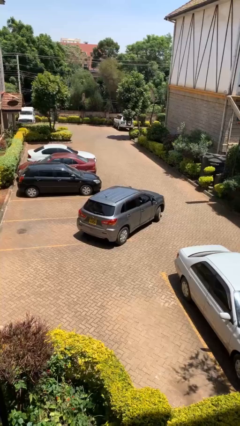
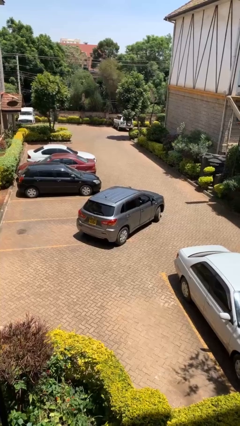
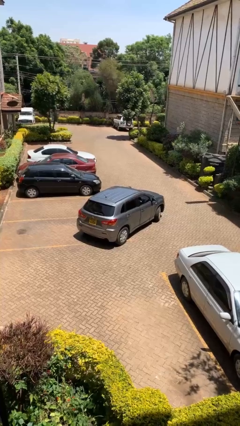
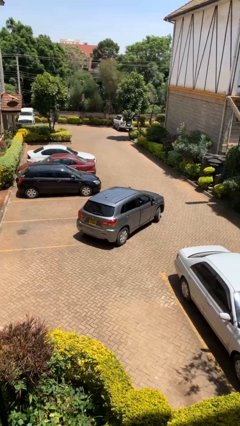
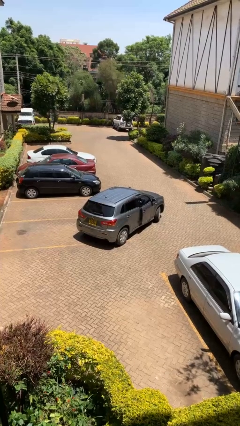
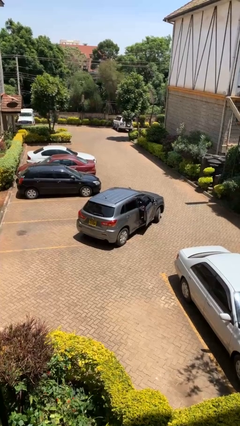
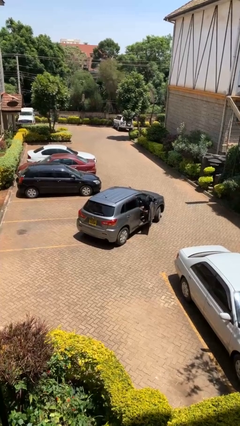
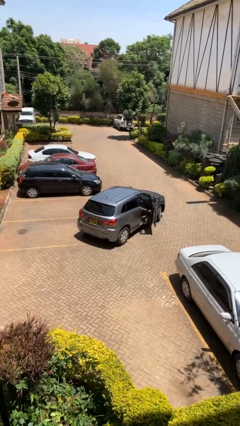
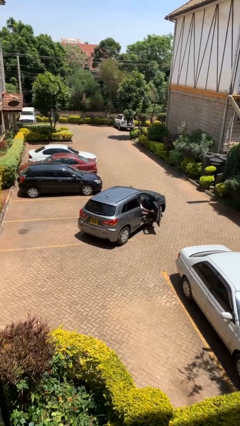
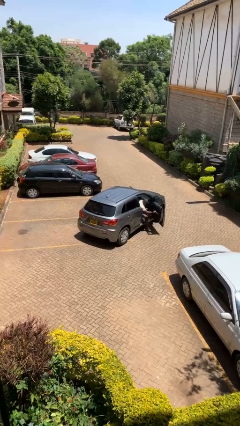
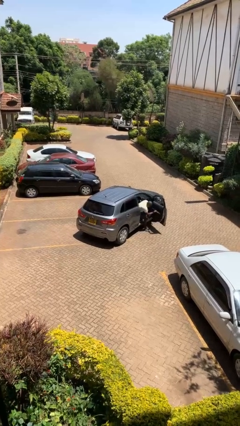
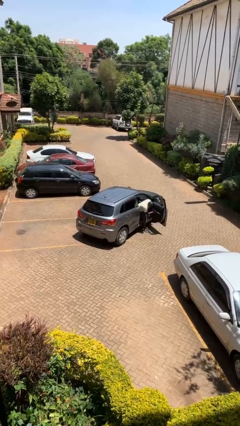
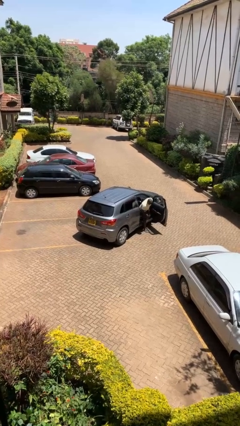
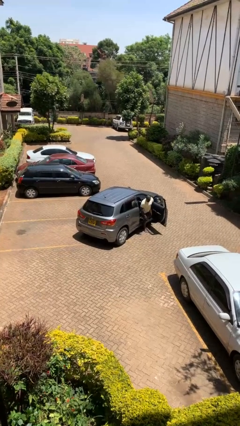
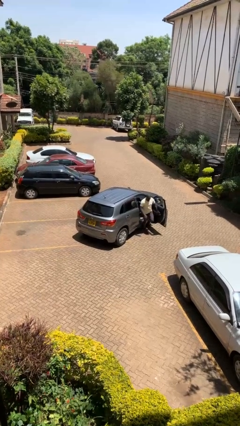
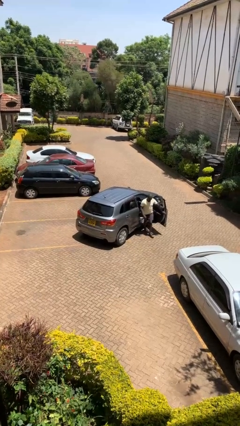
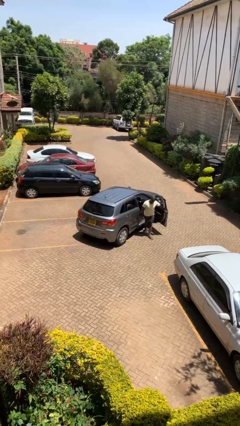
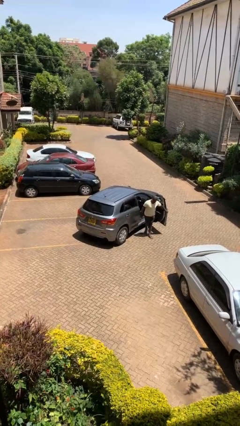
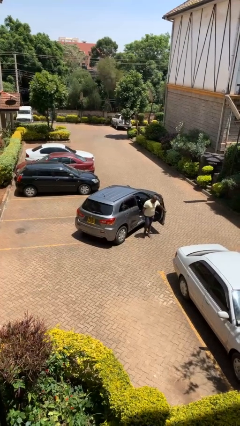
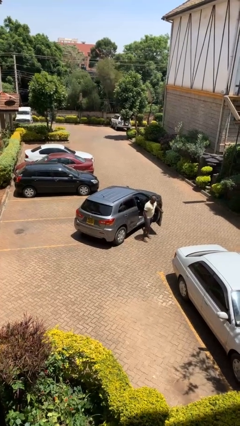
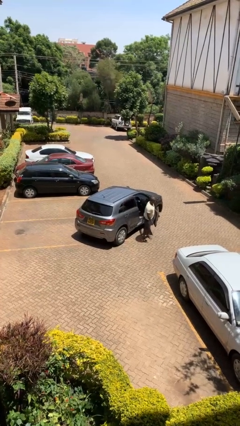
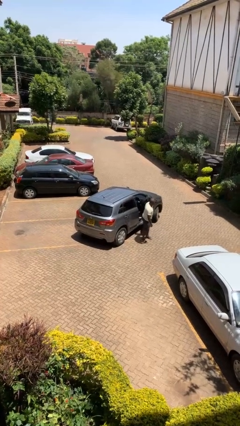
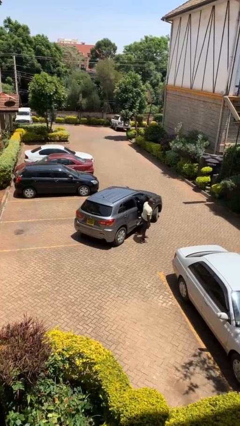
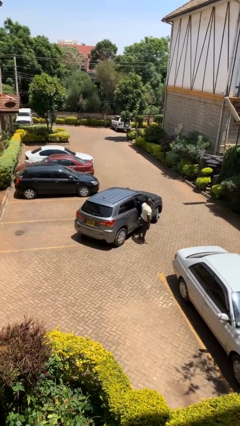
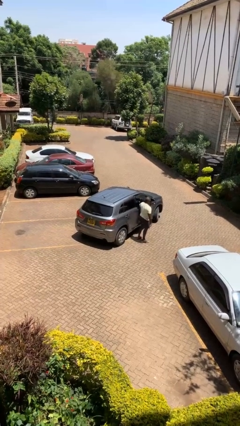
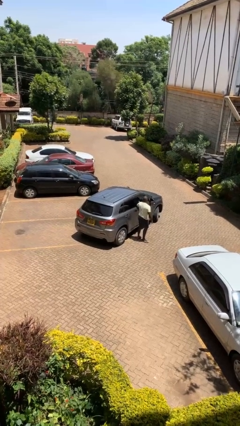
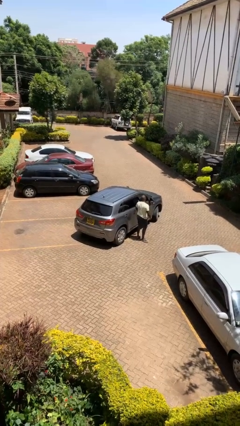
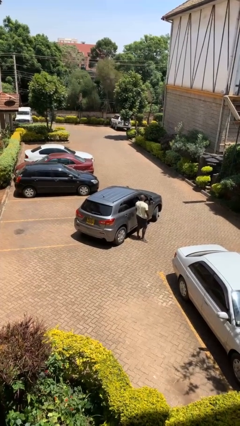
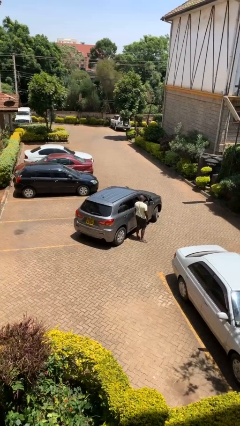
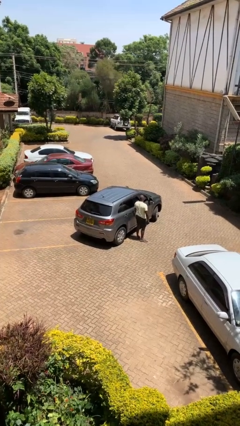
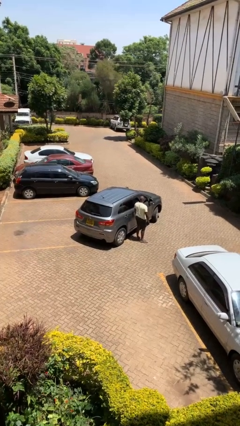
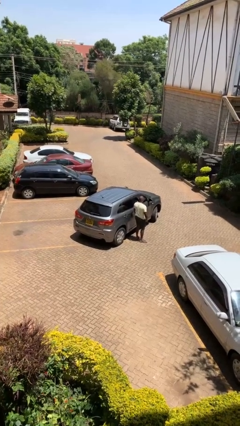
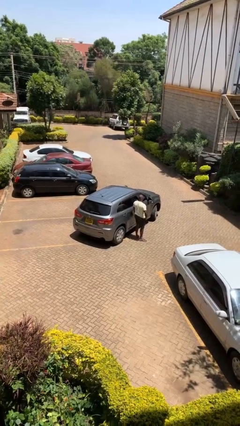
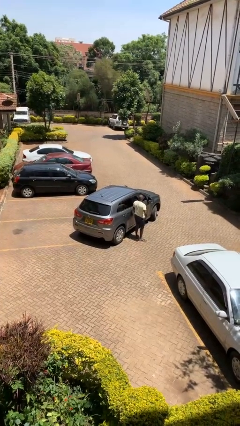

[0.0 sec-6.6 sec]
car drops off person

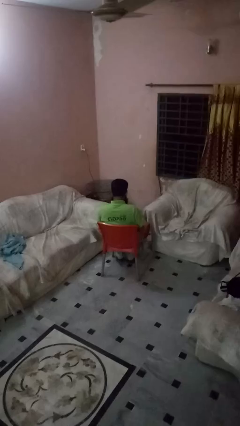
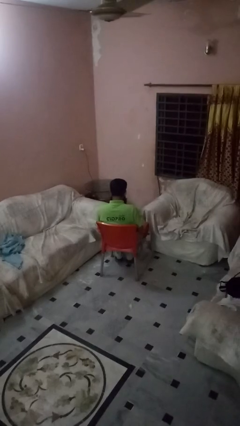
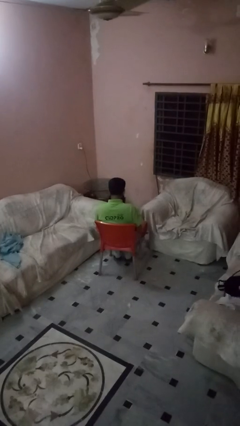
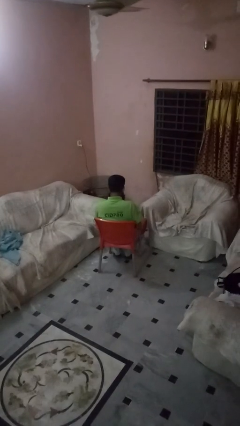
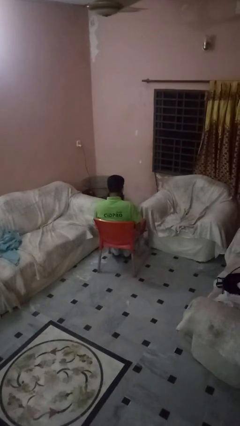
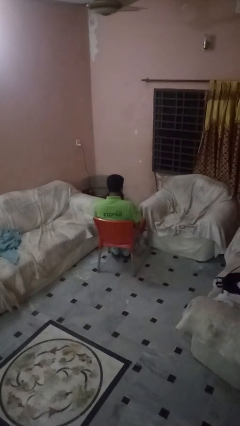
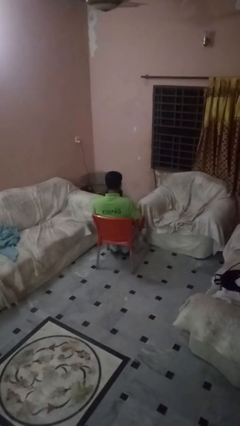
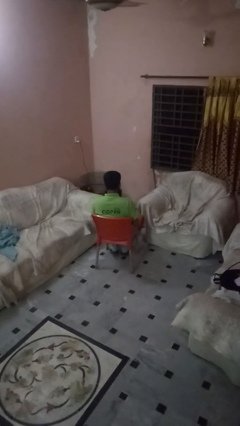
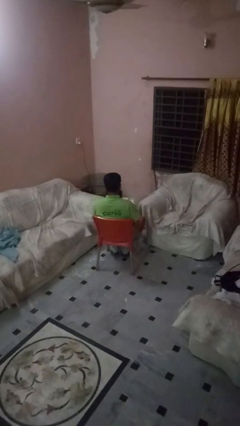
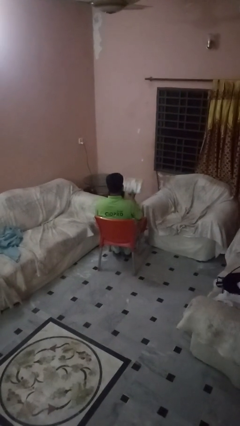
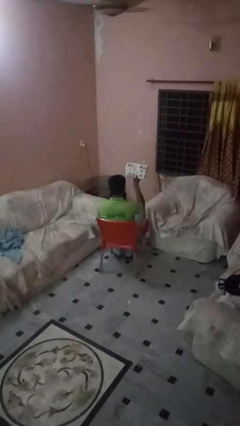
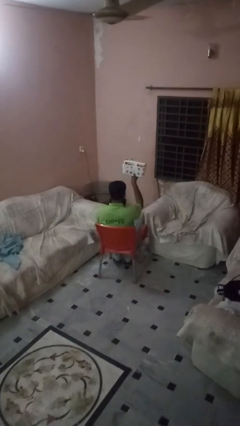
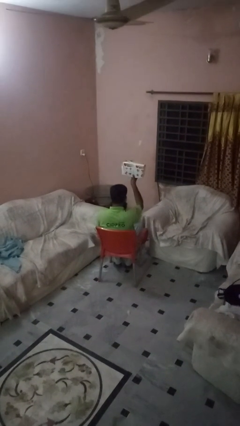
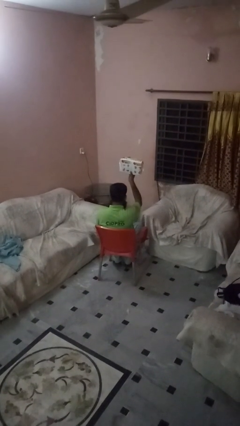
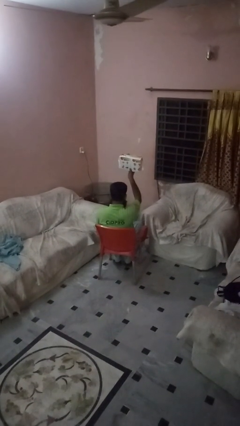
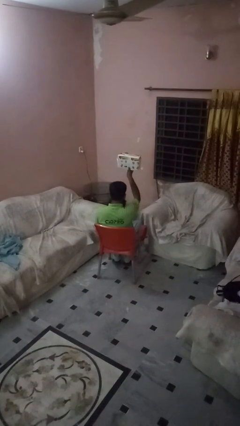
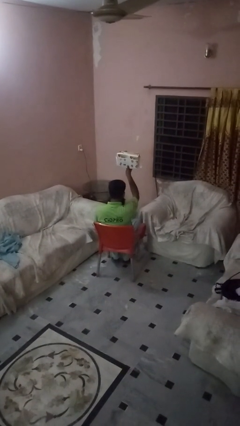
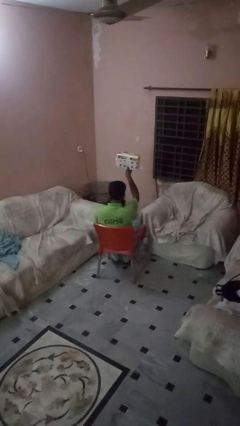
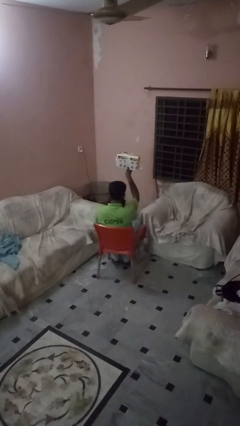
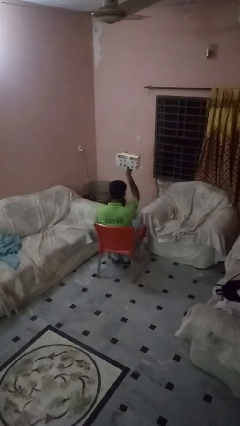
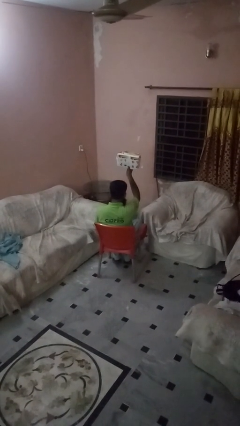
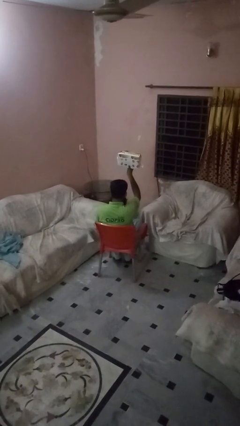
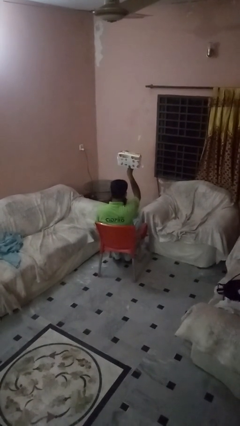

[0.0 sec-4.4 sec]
person holds object above head

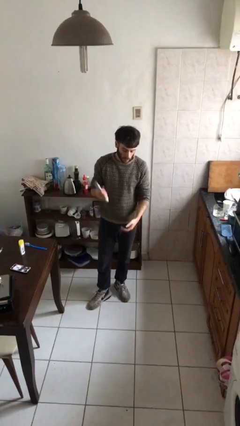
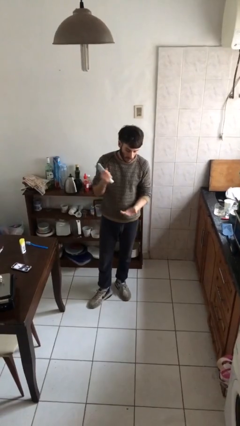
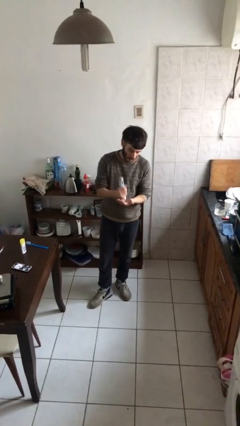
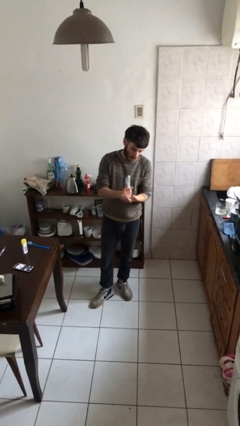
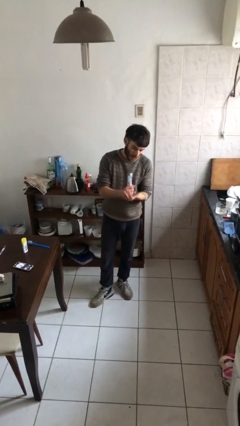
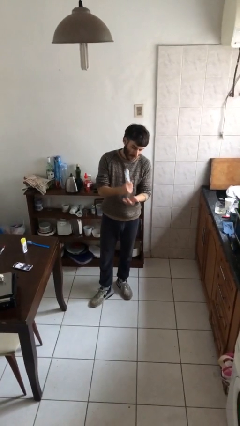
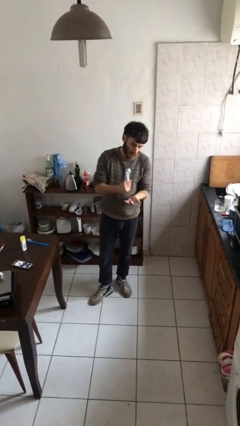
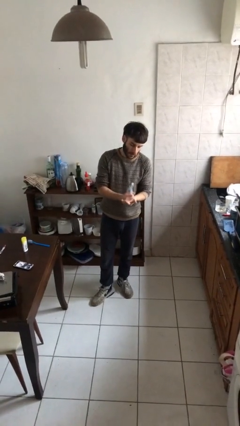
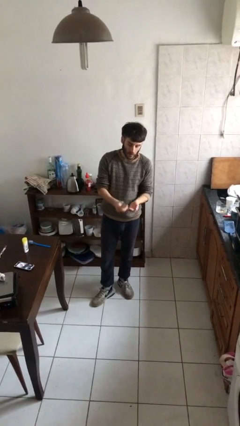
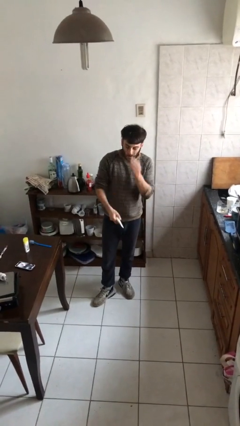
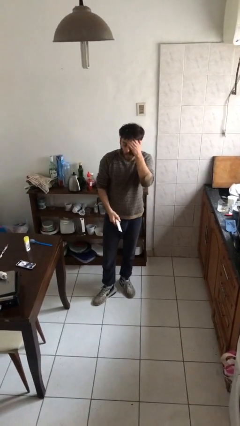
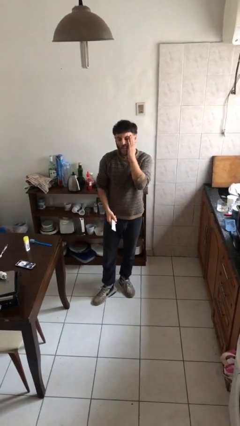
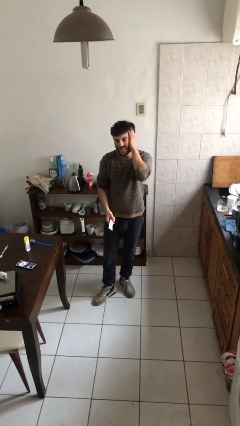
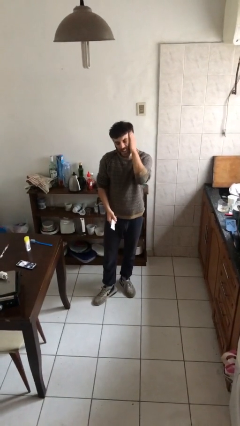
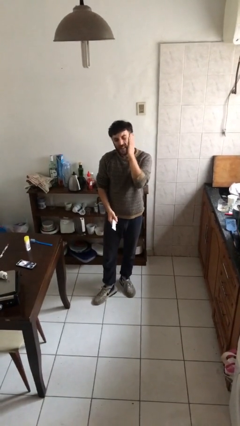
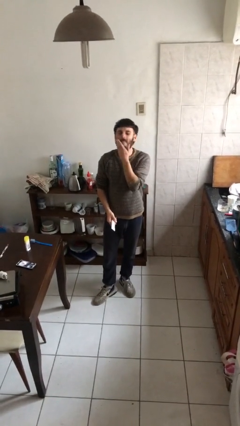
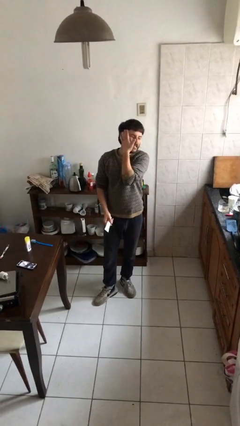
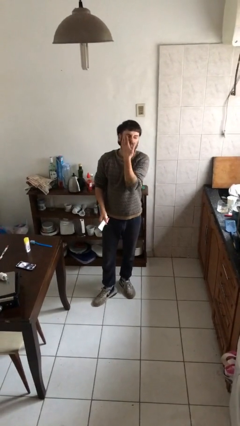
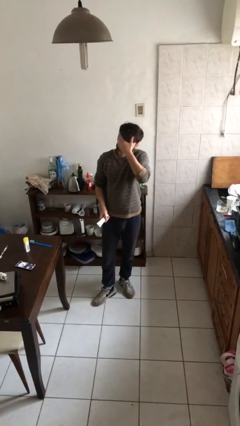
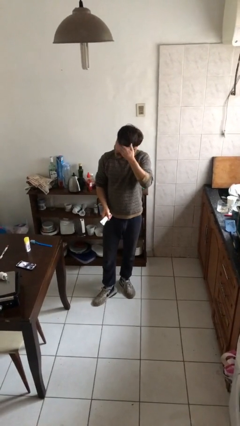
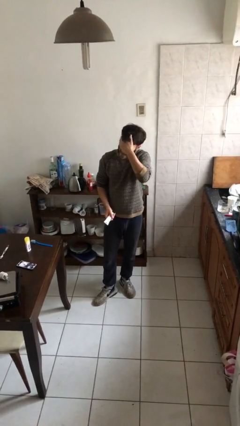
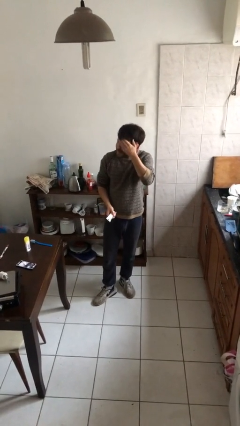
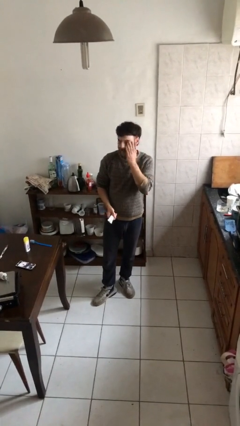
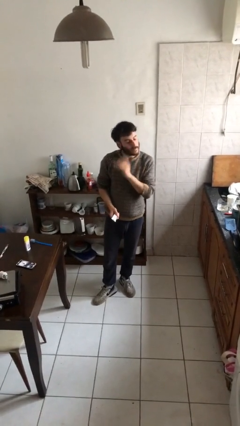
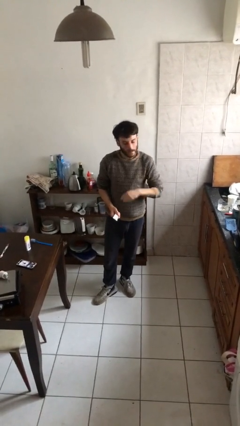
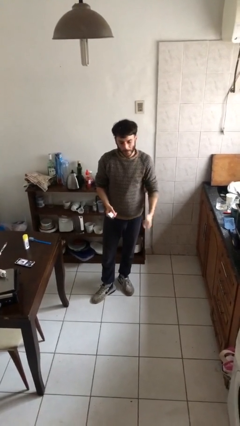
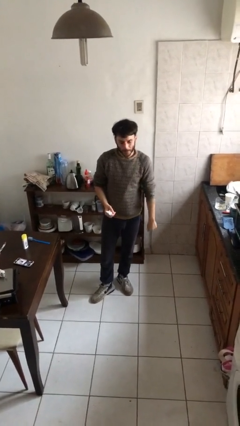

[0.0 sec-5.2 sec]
person applies sunscreen

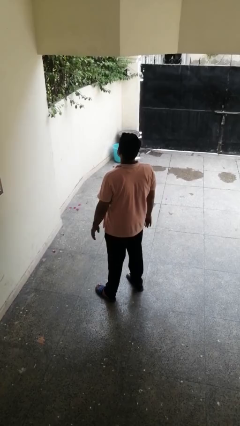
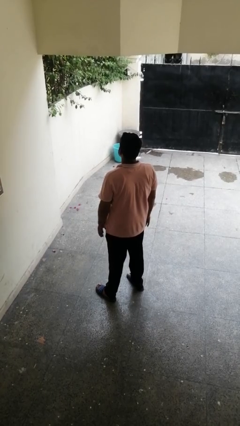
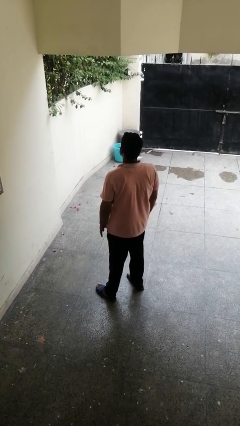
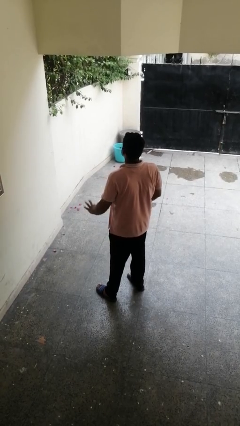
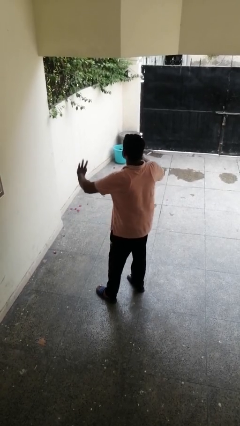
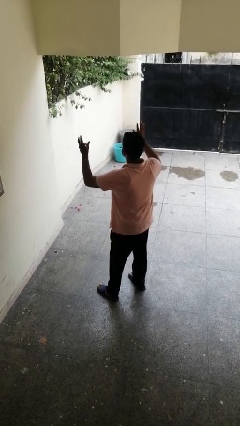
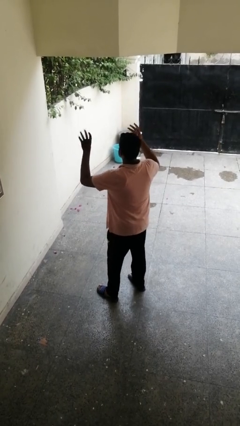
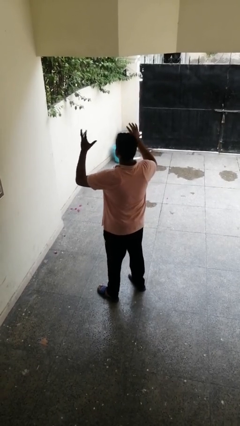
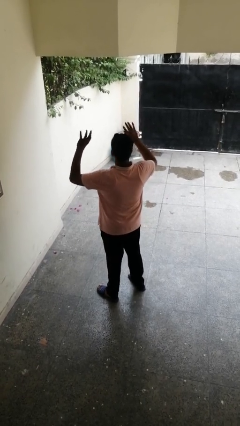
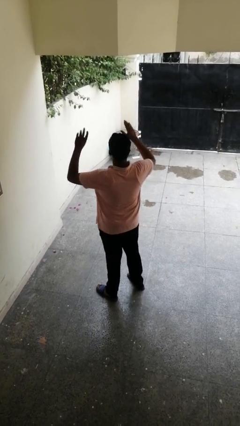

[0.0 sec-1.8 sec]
person dances in place
